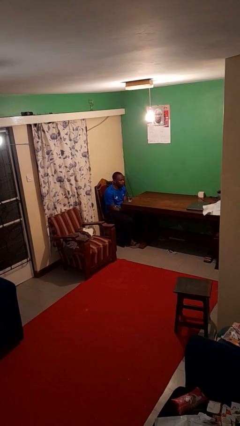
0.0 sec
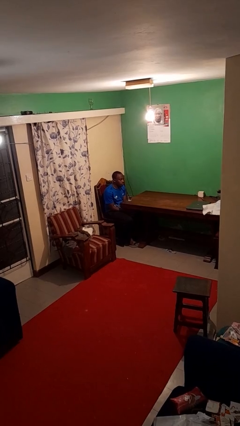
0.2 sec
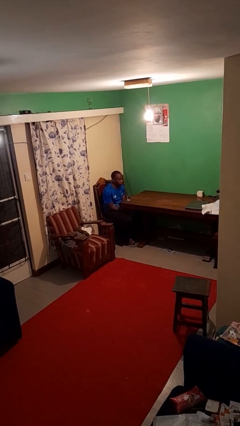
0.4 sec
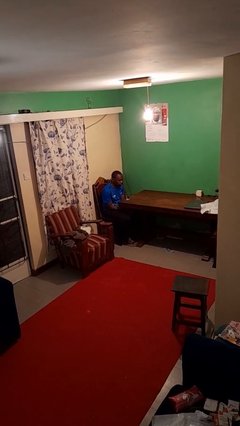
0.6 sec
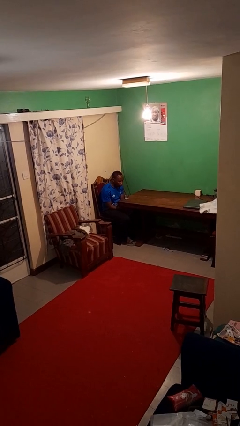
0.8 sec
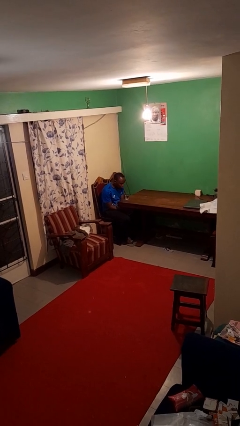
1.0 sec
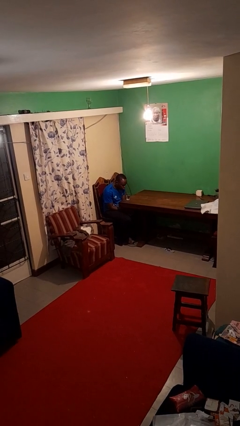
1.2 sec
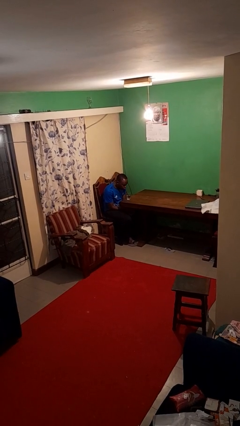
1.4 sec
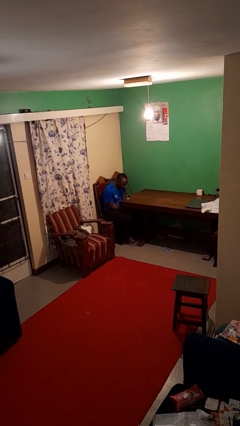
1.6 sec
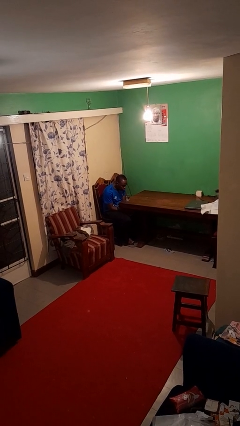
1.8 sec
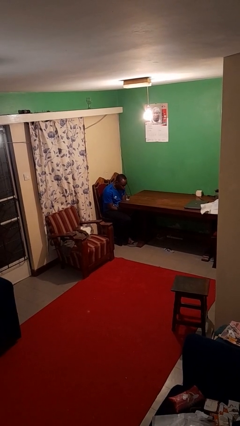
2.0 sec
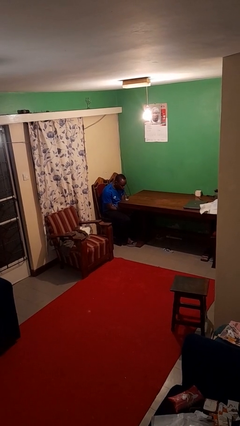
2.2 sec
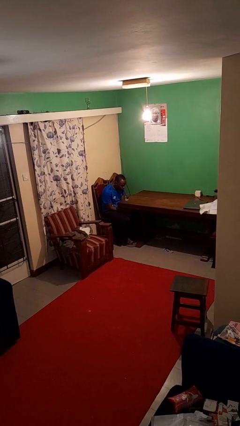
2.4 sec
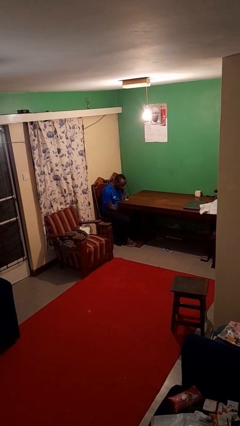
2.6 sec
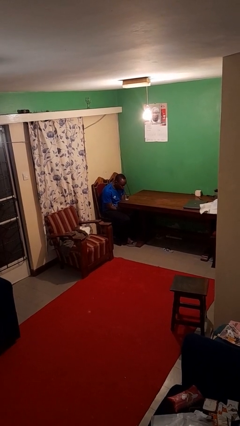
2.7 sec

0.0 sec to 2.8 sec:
person drinks from straw

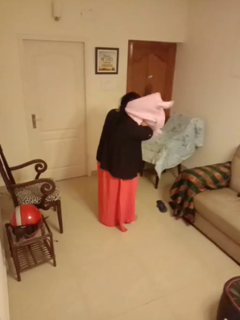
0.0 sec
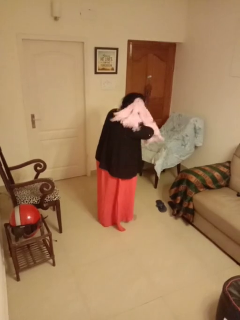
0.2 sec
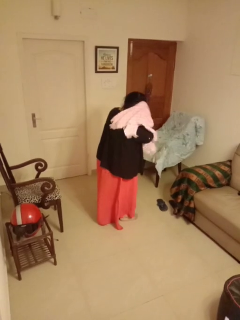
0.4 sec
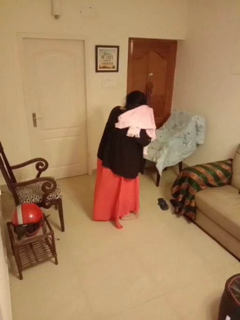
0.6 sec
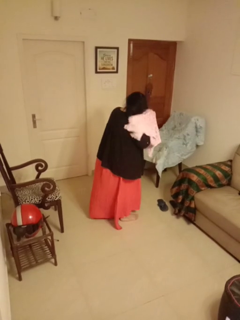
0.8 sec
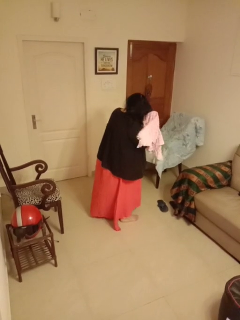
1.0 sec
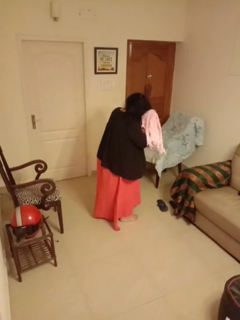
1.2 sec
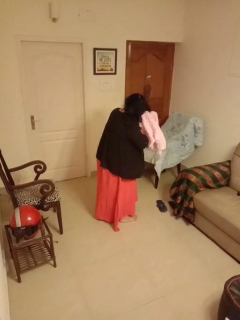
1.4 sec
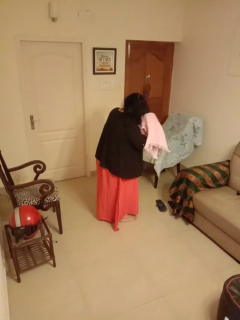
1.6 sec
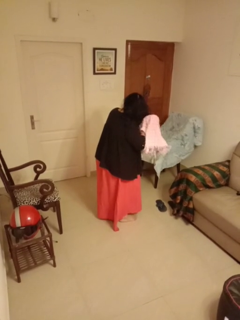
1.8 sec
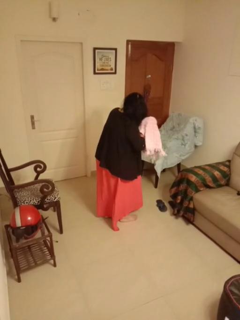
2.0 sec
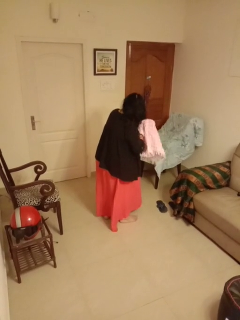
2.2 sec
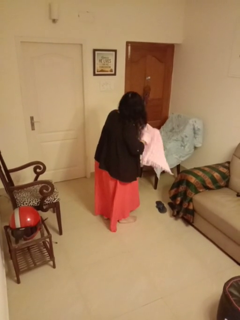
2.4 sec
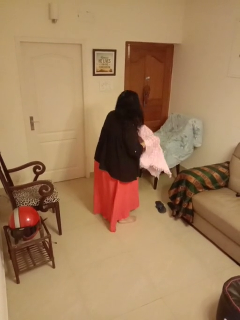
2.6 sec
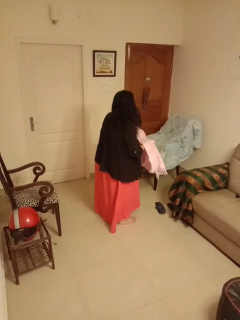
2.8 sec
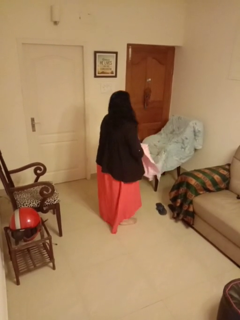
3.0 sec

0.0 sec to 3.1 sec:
person dries hair with towel

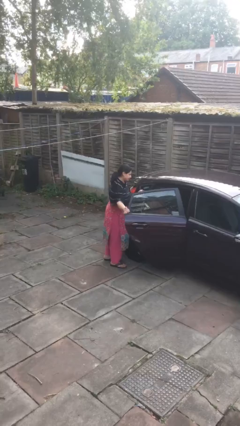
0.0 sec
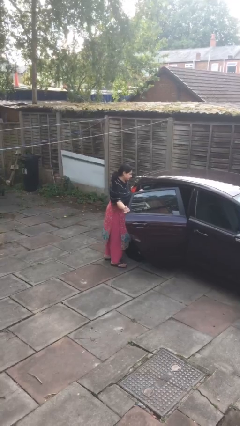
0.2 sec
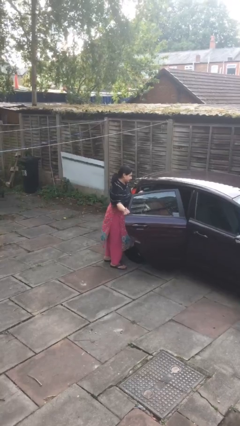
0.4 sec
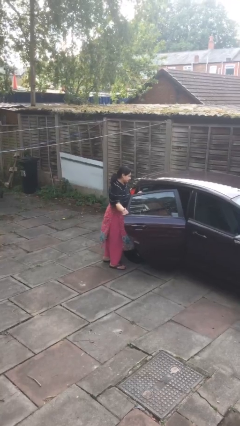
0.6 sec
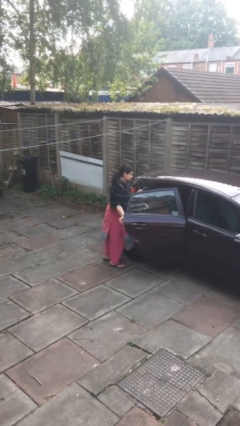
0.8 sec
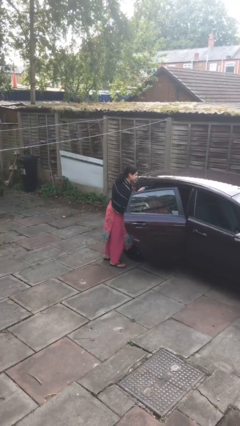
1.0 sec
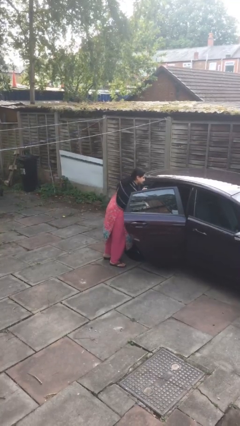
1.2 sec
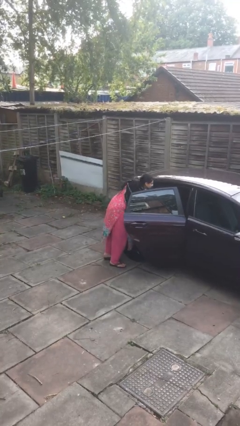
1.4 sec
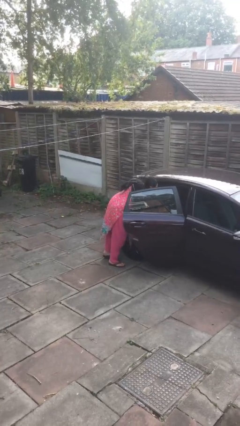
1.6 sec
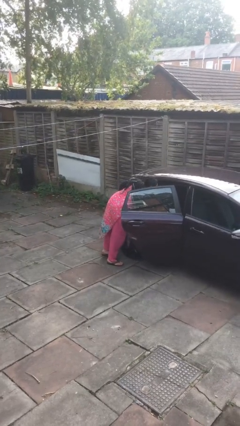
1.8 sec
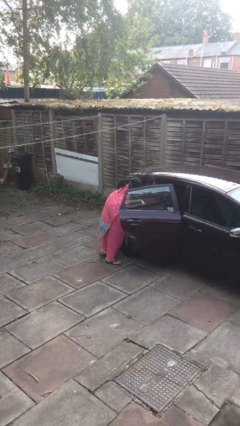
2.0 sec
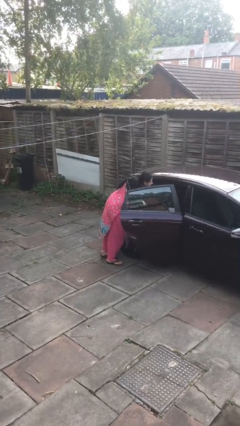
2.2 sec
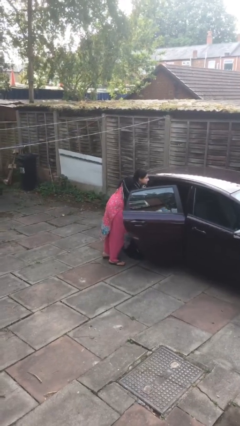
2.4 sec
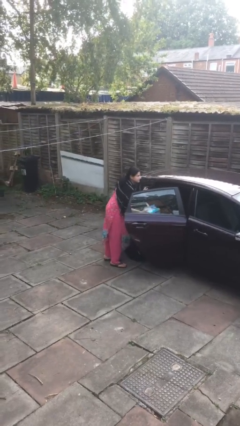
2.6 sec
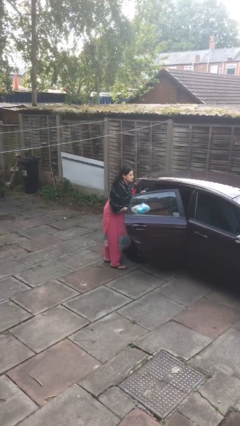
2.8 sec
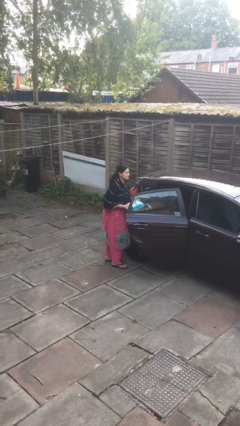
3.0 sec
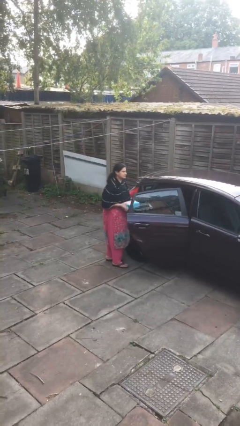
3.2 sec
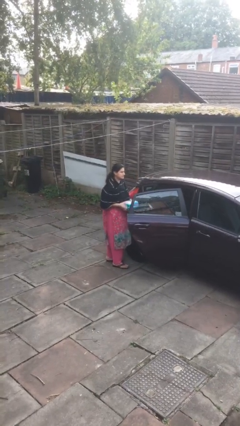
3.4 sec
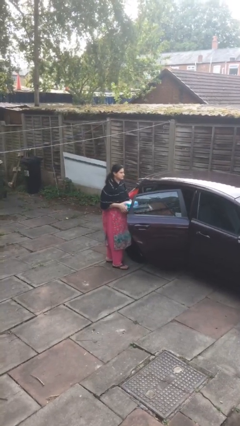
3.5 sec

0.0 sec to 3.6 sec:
person unloads car

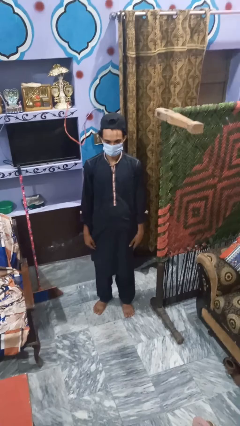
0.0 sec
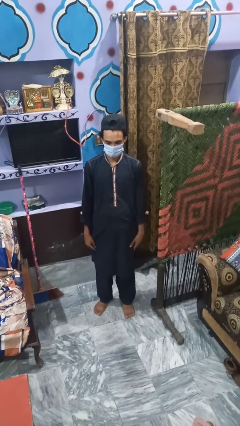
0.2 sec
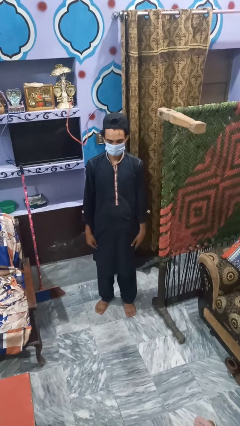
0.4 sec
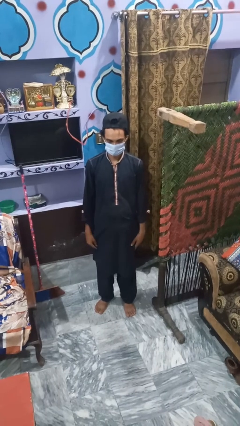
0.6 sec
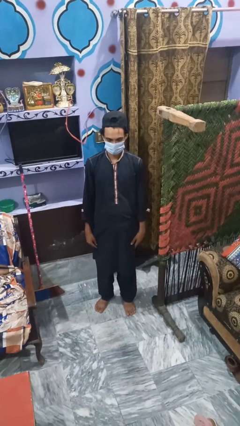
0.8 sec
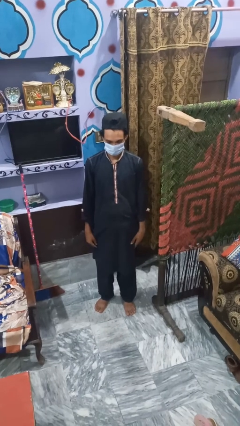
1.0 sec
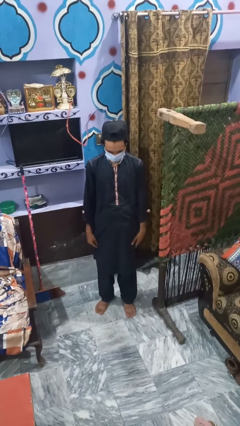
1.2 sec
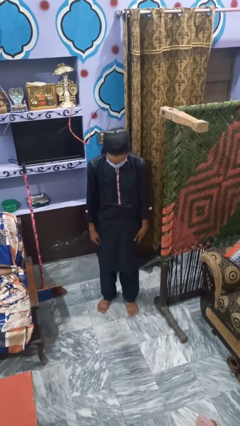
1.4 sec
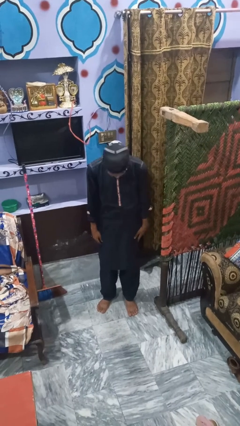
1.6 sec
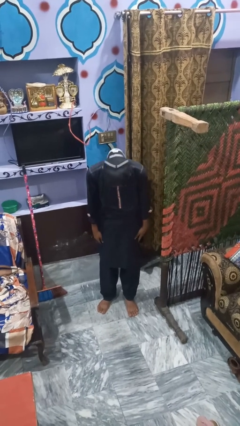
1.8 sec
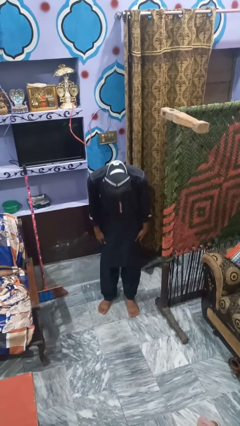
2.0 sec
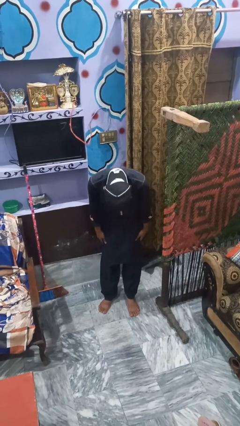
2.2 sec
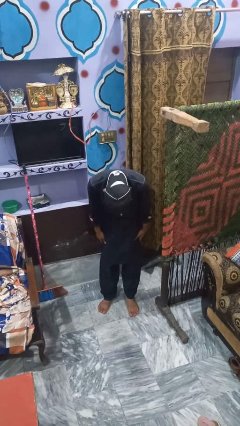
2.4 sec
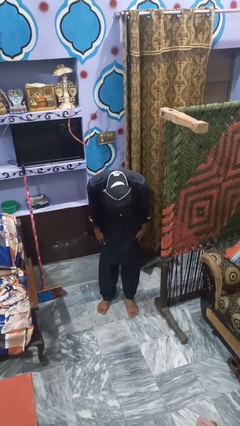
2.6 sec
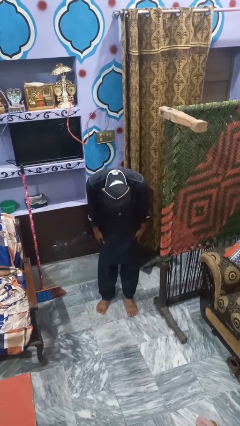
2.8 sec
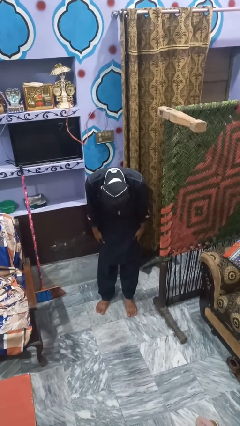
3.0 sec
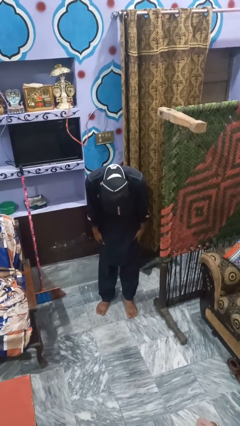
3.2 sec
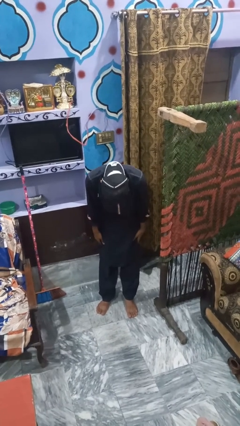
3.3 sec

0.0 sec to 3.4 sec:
person bows

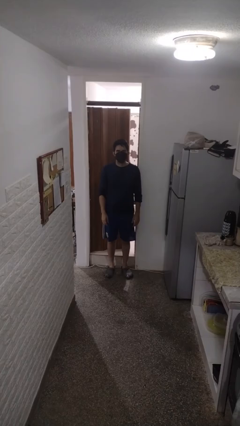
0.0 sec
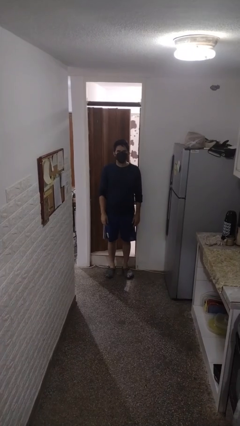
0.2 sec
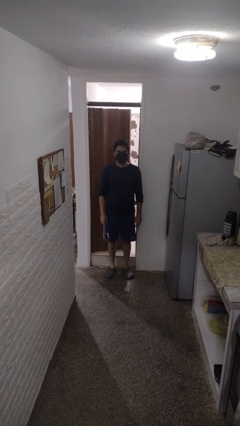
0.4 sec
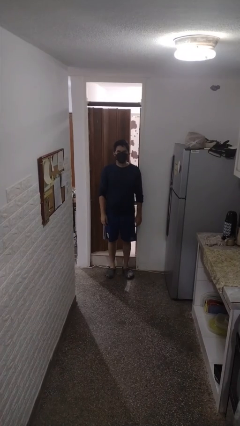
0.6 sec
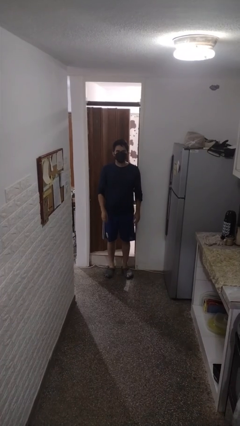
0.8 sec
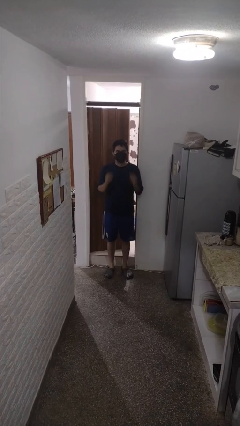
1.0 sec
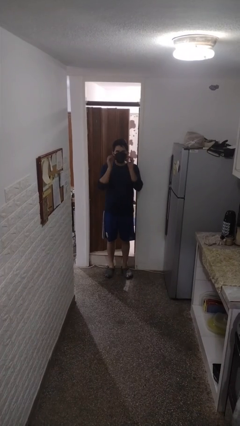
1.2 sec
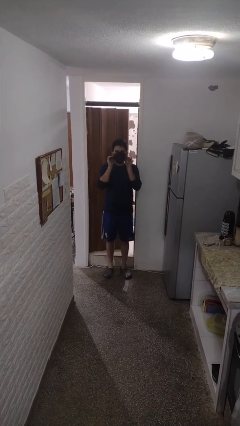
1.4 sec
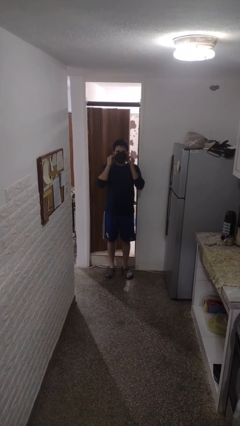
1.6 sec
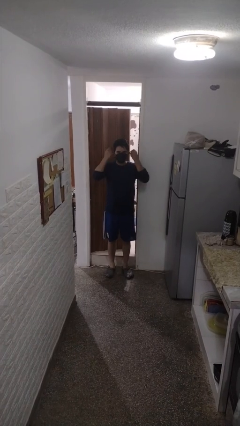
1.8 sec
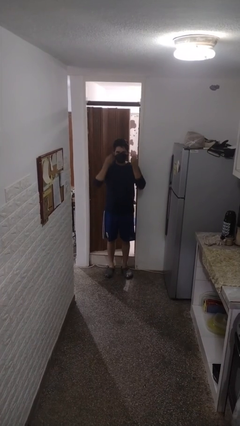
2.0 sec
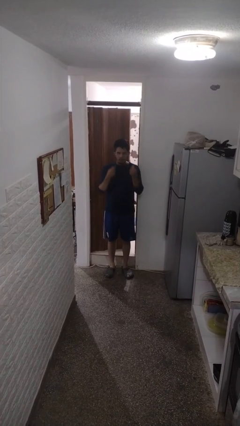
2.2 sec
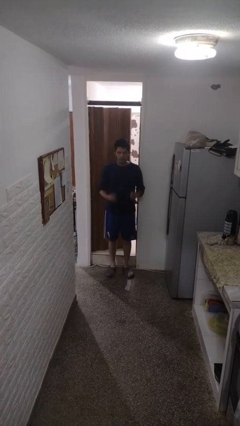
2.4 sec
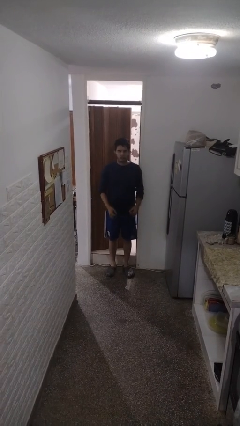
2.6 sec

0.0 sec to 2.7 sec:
person takes off facemask

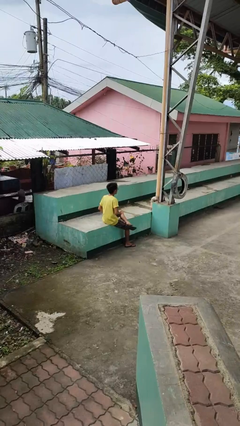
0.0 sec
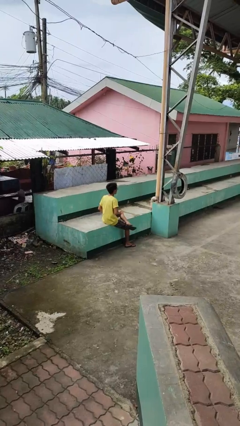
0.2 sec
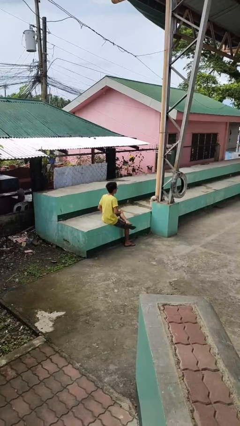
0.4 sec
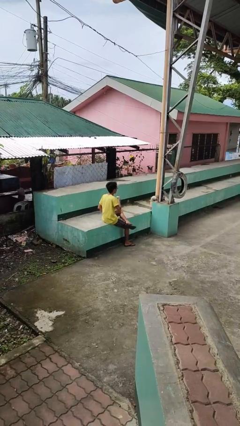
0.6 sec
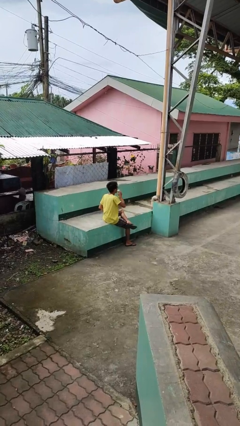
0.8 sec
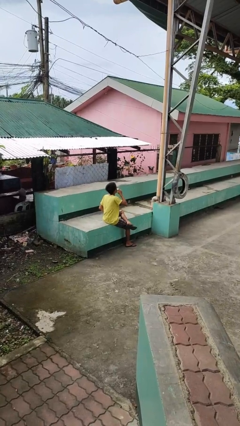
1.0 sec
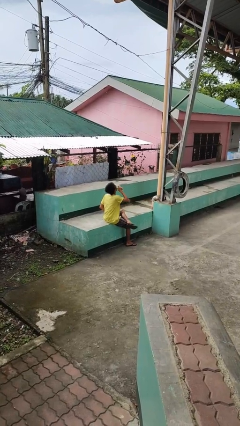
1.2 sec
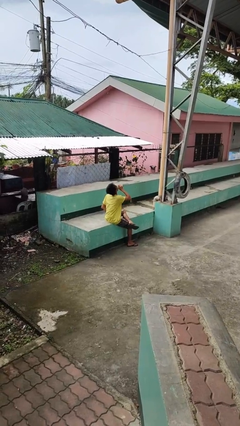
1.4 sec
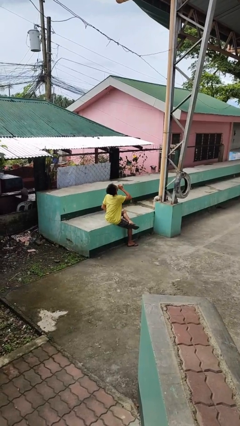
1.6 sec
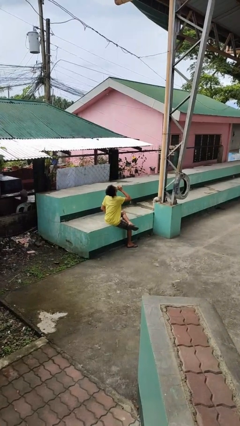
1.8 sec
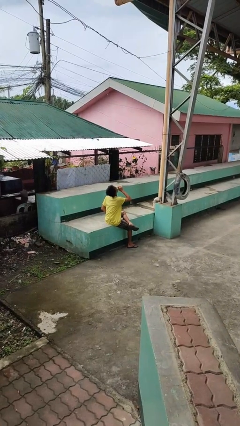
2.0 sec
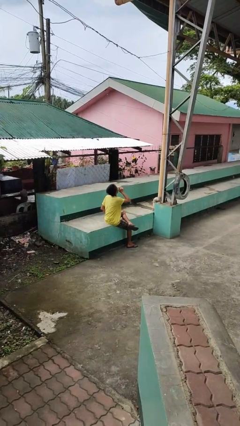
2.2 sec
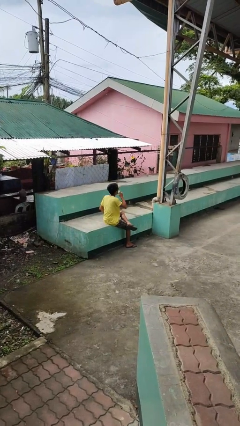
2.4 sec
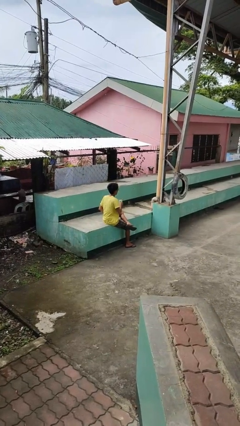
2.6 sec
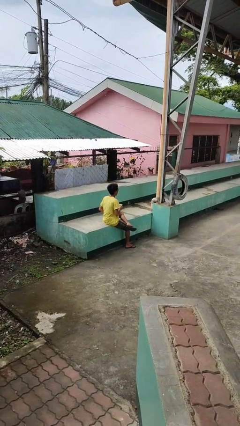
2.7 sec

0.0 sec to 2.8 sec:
person drinks from bottle

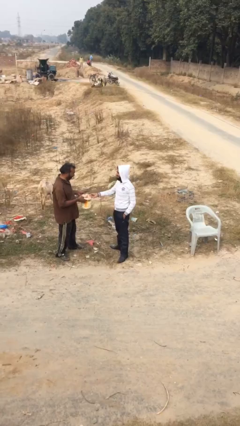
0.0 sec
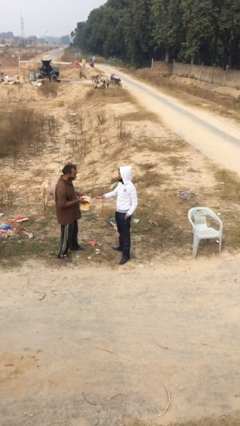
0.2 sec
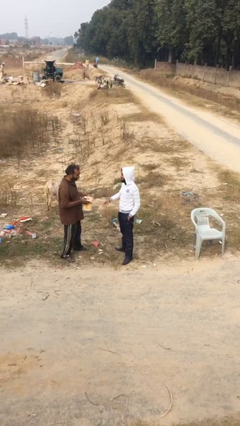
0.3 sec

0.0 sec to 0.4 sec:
person transfers object to person
